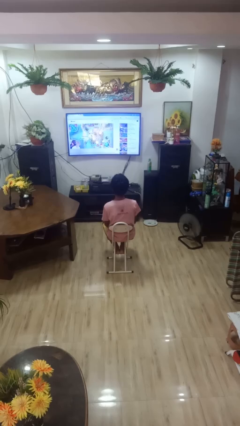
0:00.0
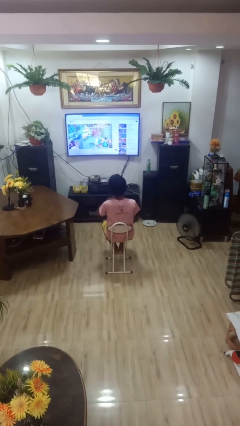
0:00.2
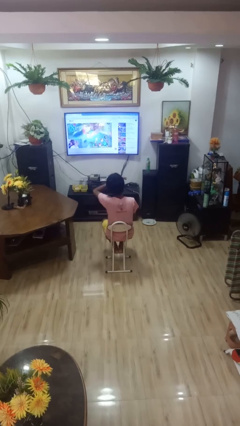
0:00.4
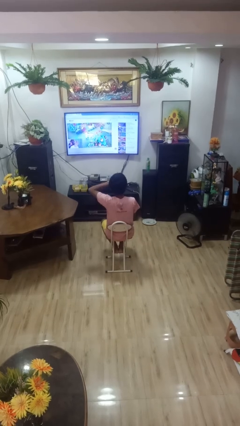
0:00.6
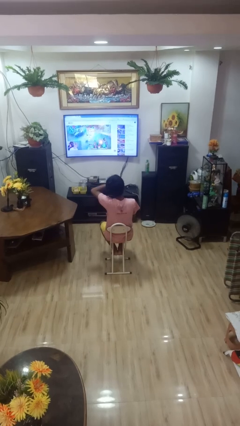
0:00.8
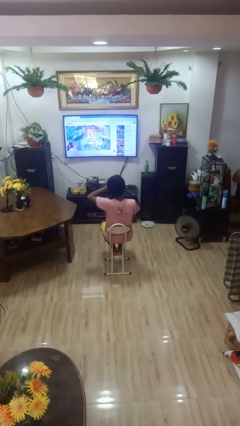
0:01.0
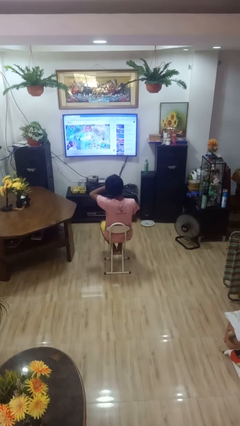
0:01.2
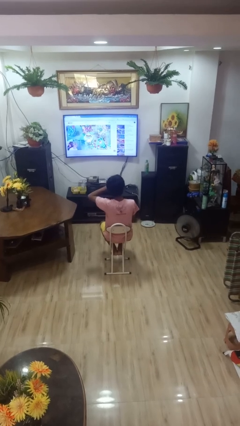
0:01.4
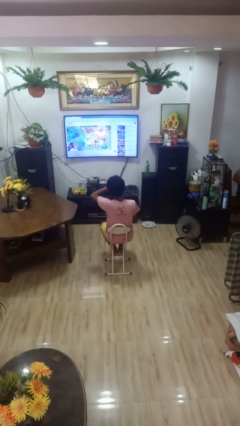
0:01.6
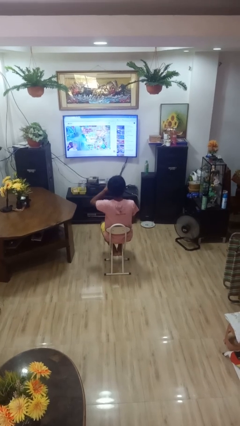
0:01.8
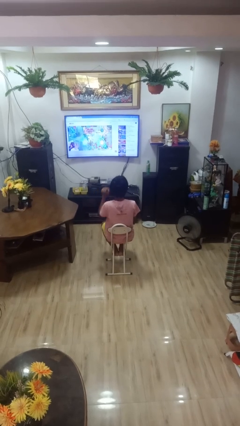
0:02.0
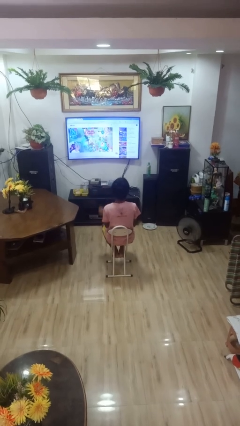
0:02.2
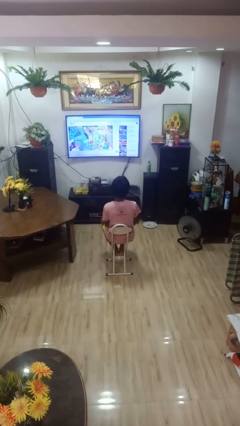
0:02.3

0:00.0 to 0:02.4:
person rubs eyes

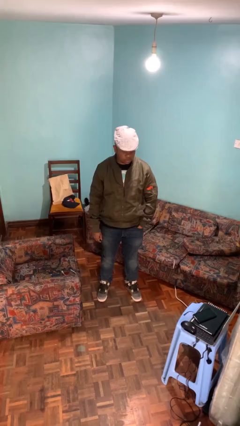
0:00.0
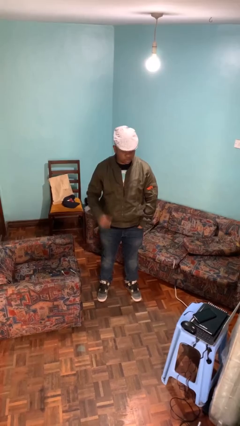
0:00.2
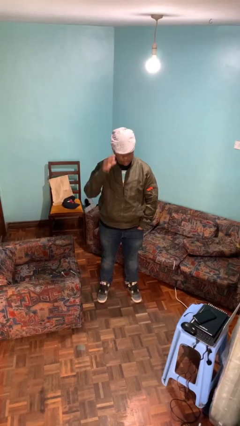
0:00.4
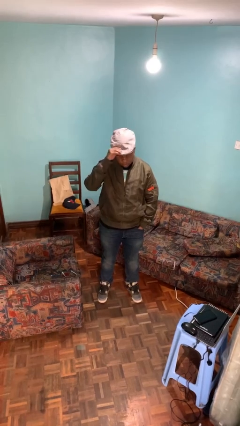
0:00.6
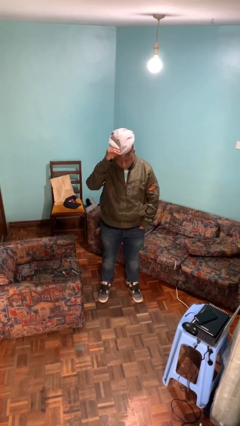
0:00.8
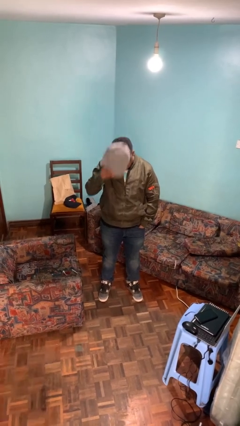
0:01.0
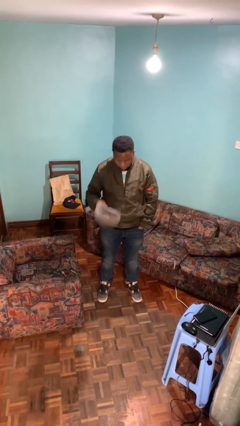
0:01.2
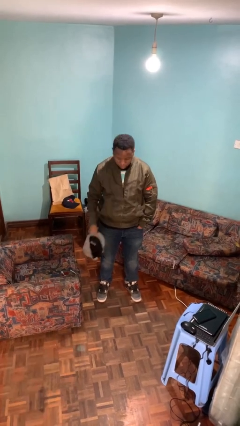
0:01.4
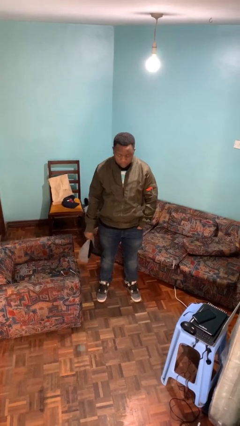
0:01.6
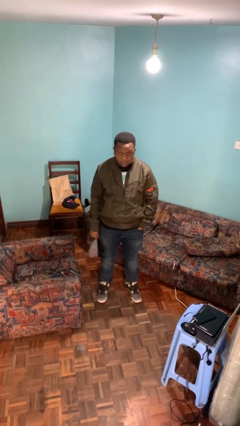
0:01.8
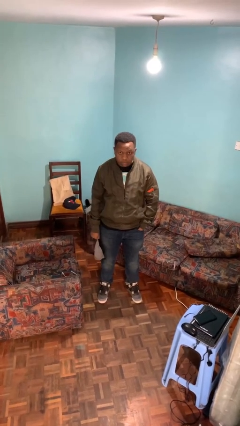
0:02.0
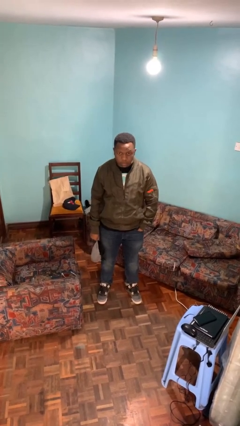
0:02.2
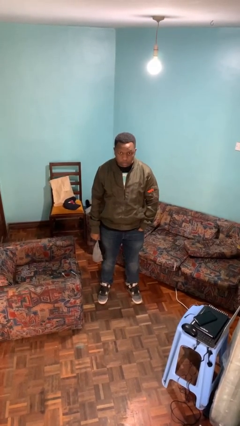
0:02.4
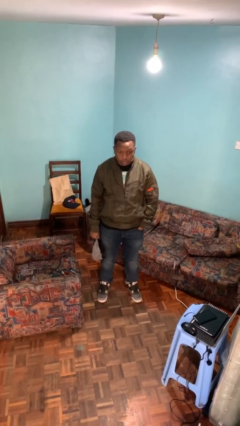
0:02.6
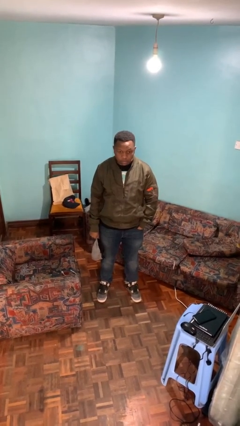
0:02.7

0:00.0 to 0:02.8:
person takes off hat

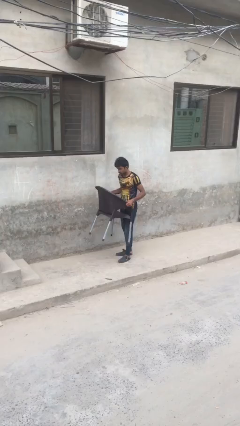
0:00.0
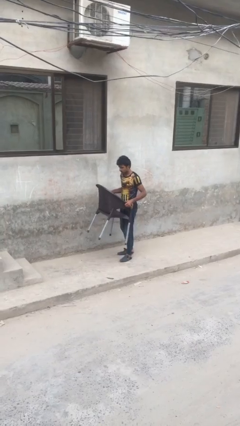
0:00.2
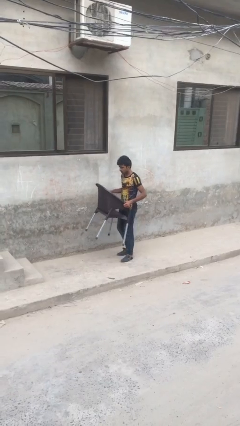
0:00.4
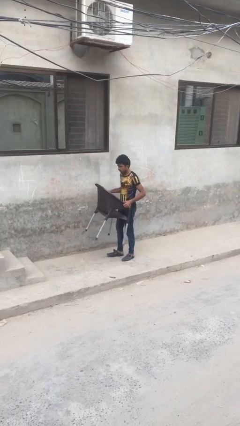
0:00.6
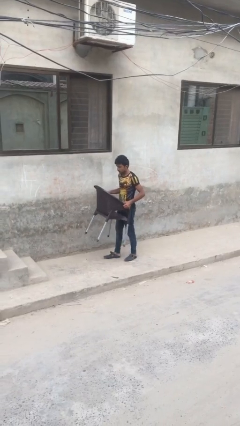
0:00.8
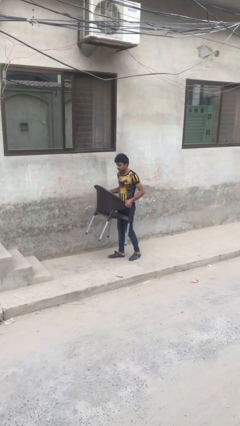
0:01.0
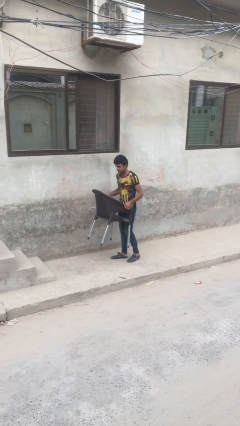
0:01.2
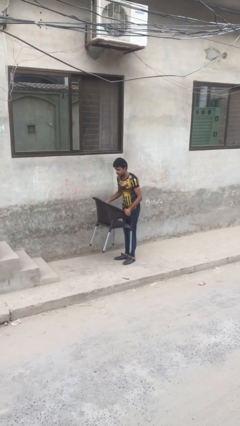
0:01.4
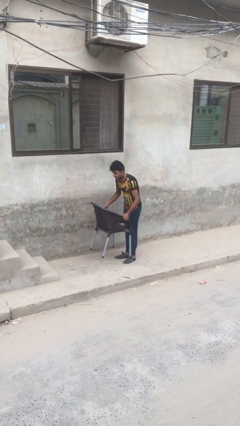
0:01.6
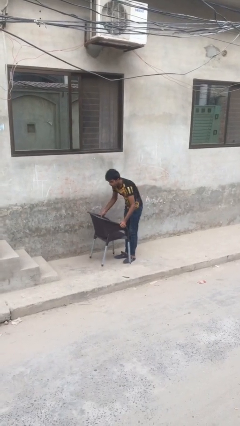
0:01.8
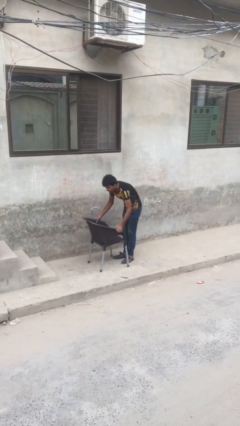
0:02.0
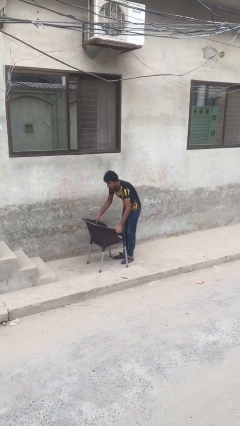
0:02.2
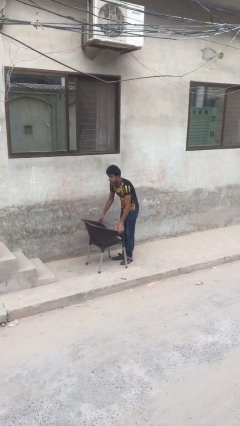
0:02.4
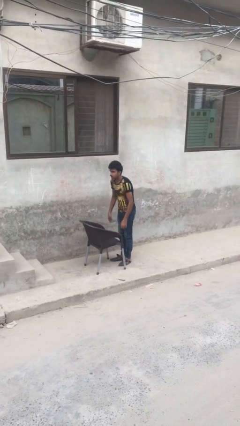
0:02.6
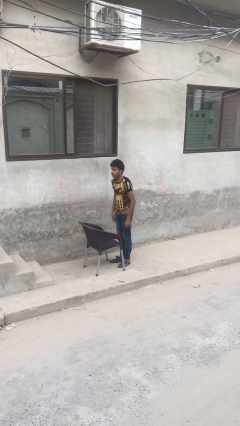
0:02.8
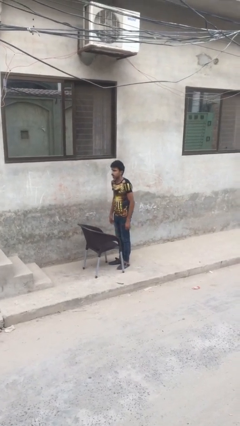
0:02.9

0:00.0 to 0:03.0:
person puts down object on floor

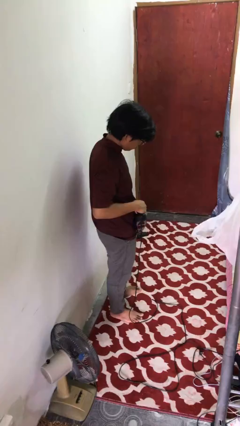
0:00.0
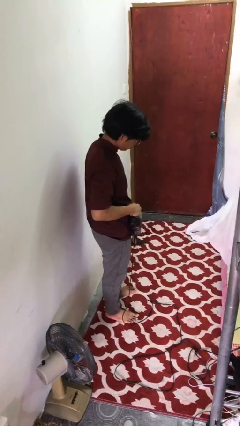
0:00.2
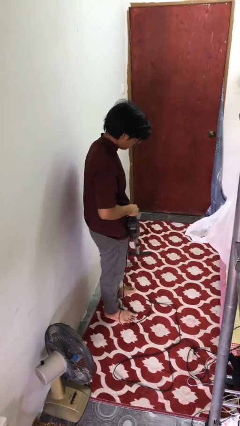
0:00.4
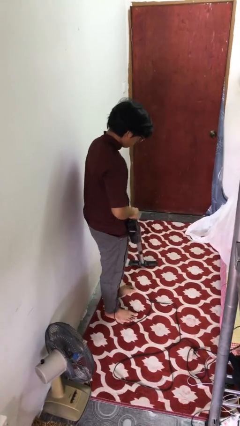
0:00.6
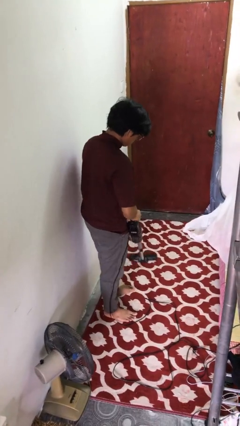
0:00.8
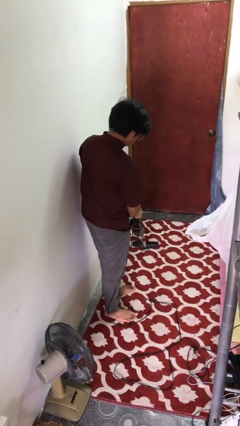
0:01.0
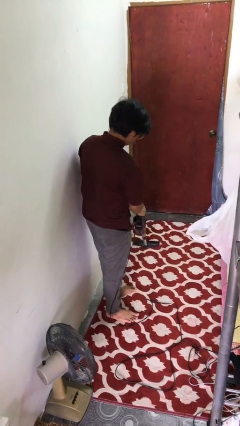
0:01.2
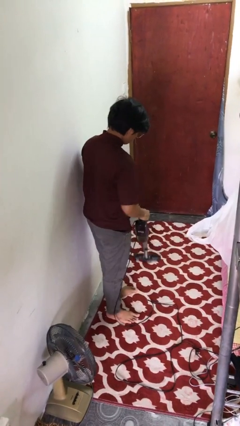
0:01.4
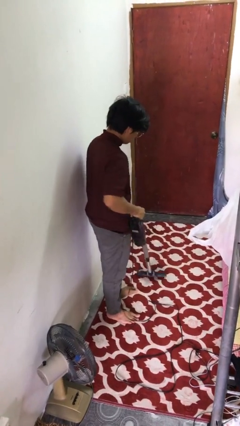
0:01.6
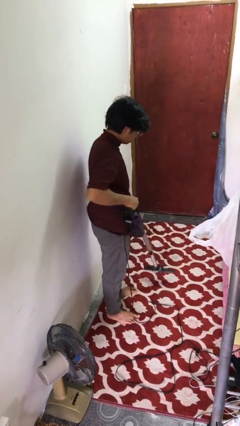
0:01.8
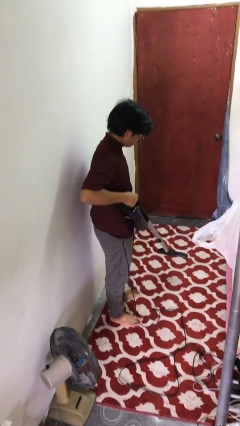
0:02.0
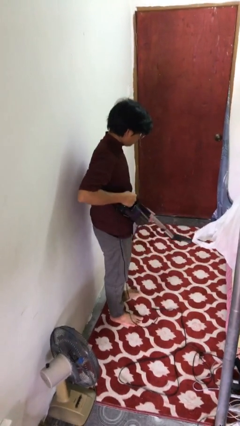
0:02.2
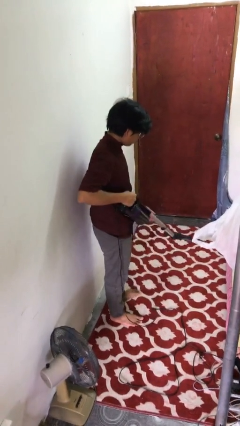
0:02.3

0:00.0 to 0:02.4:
person vacuums carpet

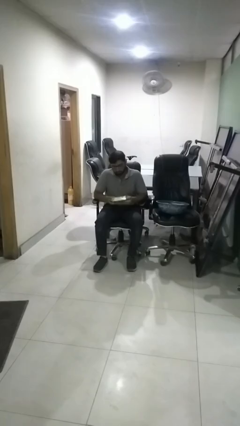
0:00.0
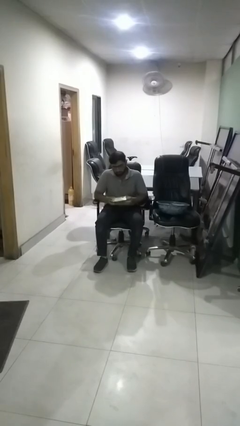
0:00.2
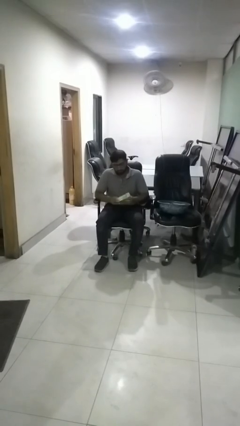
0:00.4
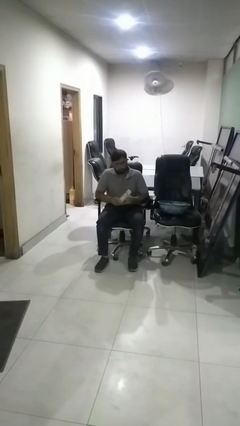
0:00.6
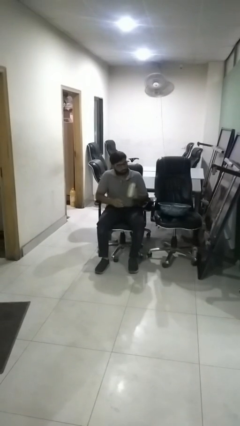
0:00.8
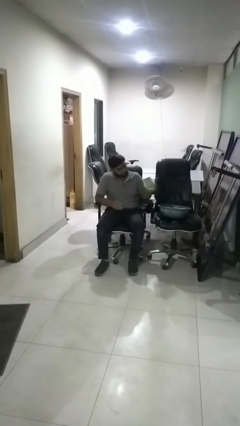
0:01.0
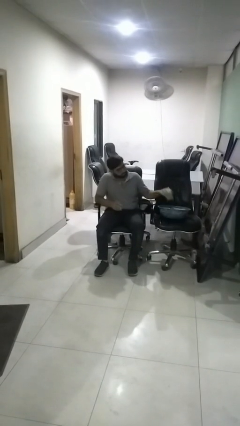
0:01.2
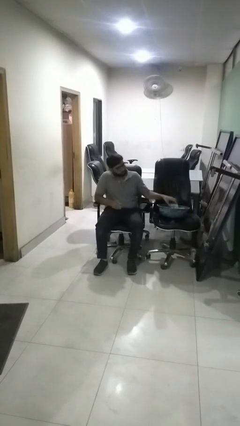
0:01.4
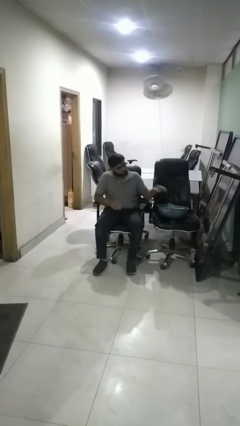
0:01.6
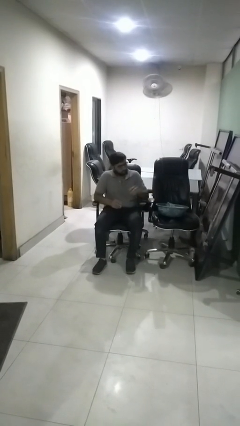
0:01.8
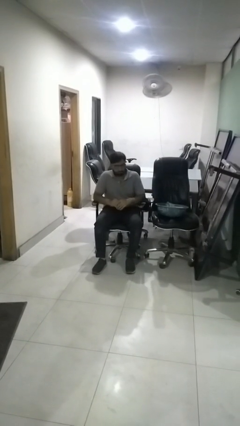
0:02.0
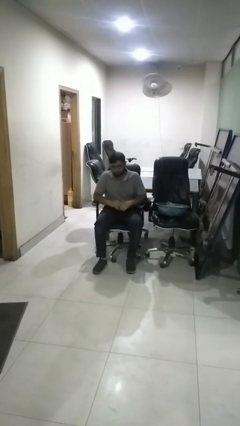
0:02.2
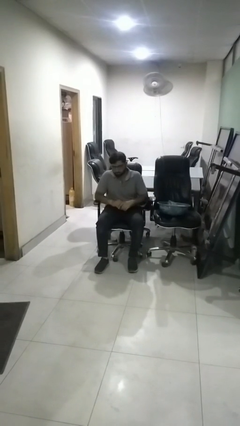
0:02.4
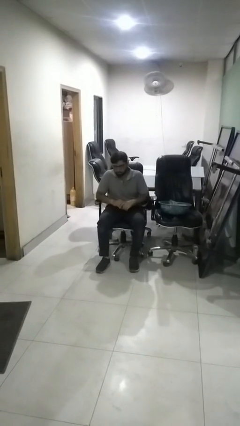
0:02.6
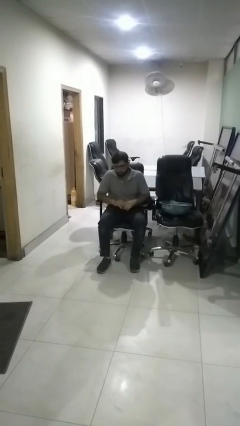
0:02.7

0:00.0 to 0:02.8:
person puts object into basket

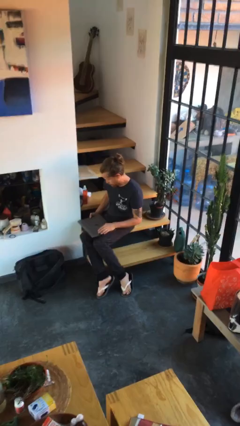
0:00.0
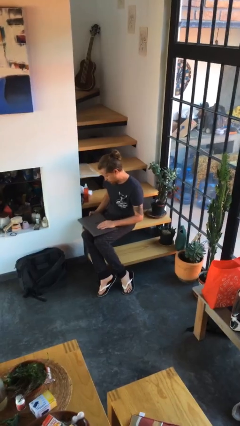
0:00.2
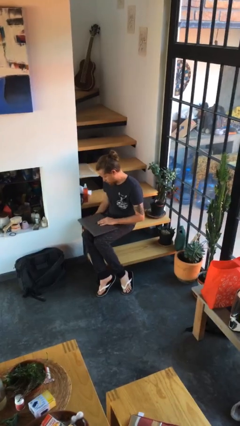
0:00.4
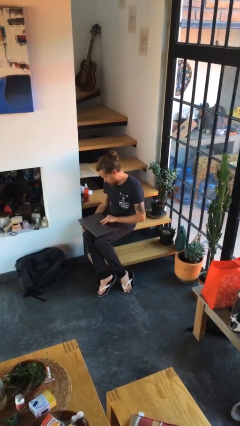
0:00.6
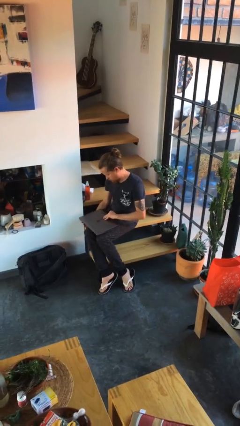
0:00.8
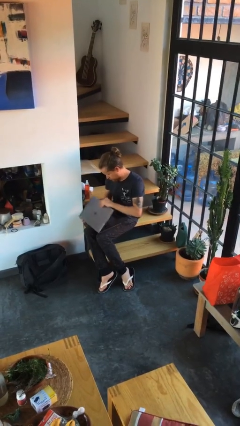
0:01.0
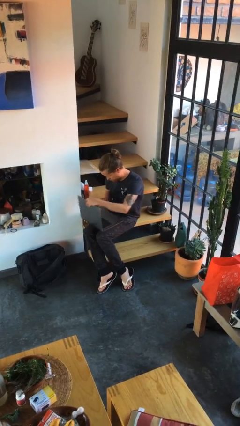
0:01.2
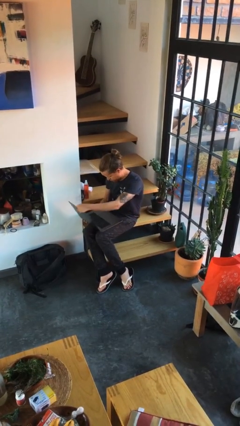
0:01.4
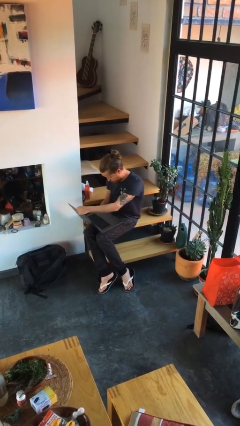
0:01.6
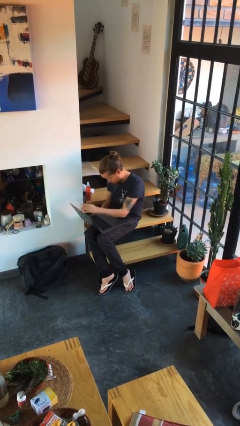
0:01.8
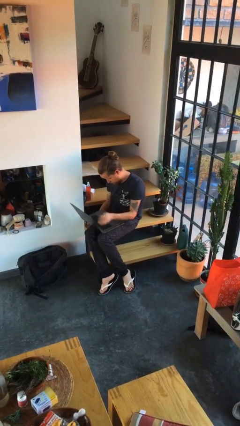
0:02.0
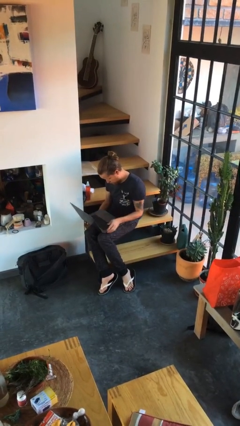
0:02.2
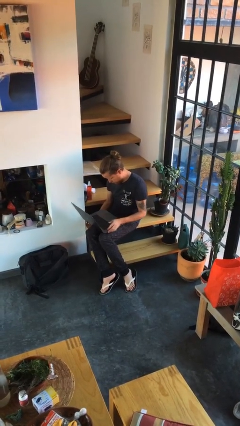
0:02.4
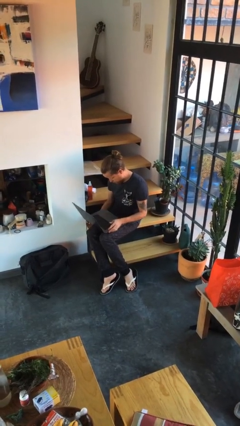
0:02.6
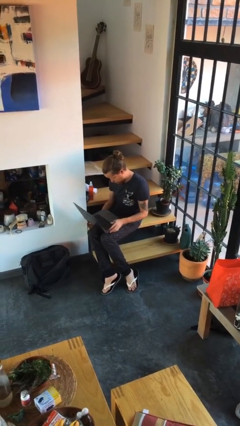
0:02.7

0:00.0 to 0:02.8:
person opens laptop

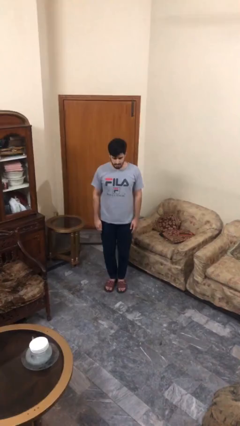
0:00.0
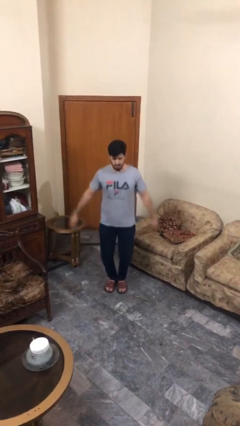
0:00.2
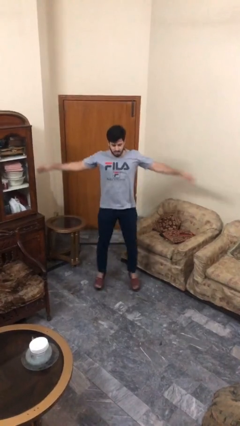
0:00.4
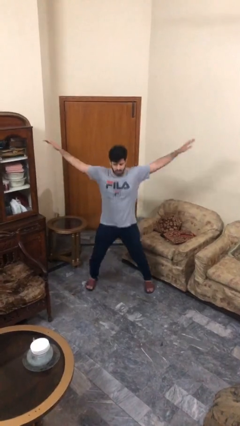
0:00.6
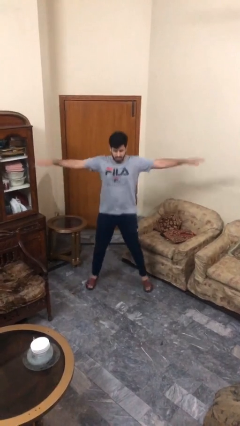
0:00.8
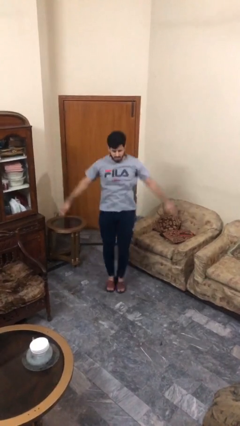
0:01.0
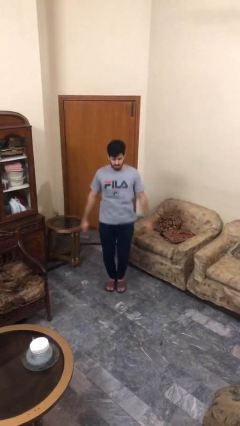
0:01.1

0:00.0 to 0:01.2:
person exercises with jumping jacks
